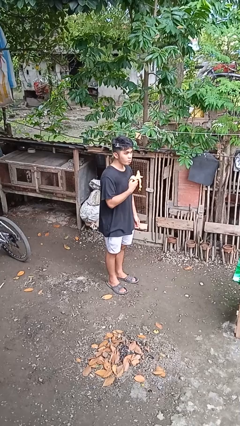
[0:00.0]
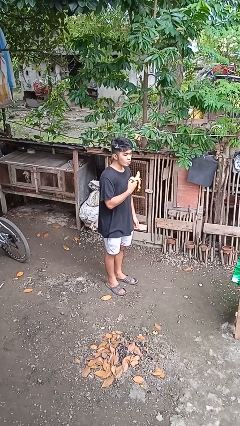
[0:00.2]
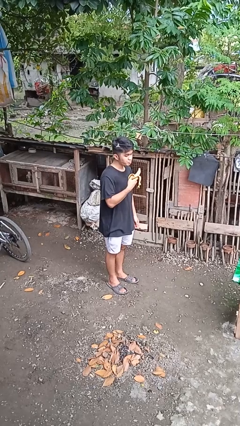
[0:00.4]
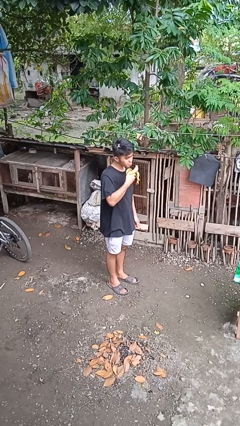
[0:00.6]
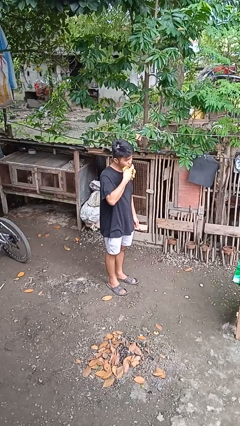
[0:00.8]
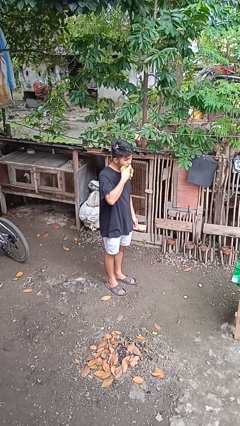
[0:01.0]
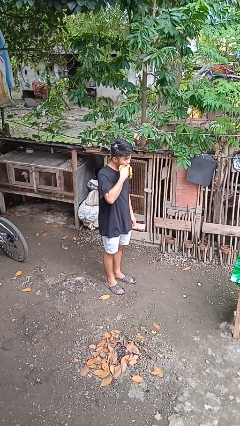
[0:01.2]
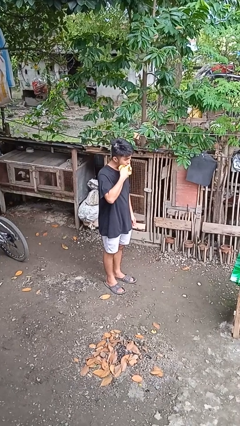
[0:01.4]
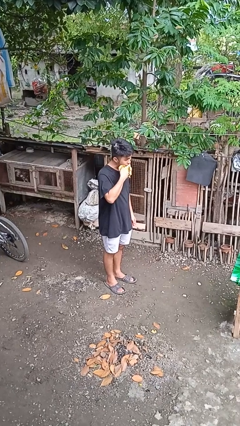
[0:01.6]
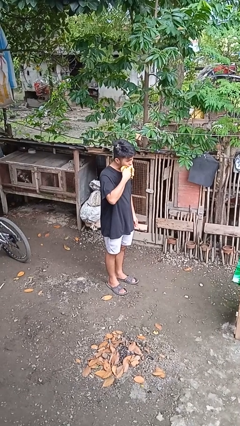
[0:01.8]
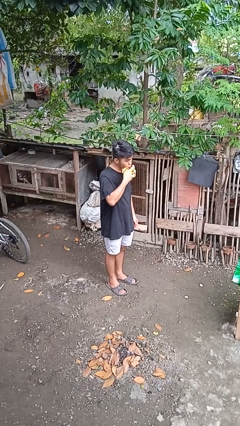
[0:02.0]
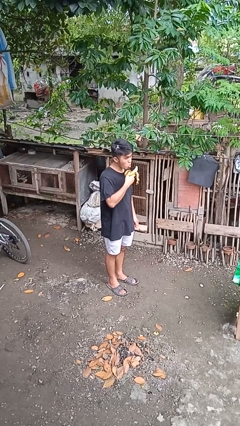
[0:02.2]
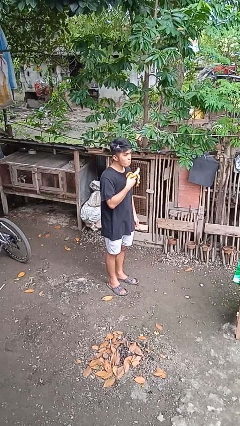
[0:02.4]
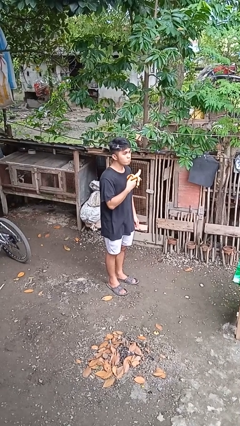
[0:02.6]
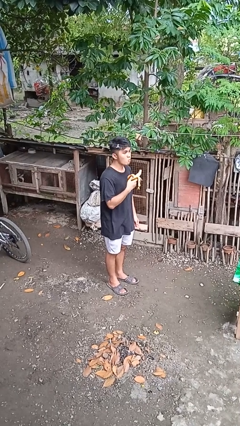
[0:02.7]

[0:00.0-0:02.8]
person eats banana

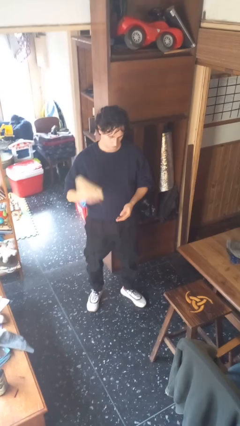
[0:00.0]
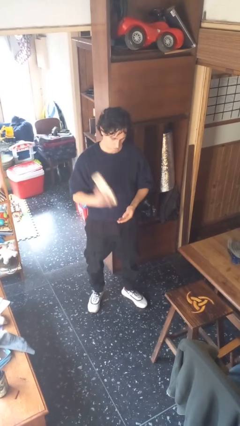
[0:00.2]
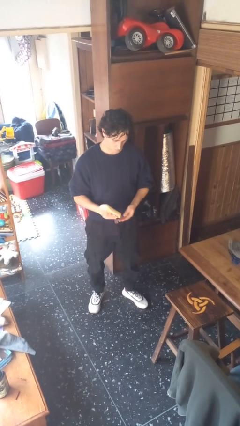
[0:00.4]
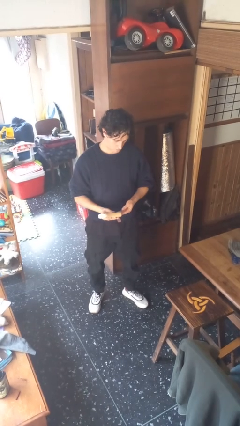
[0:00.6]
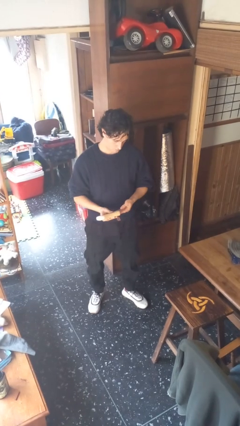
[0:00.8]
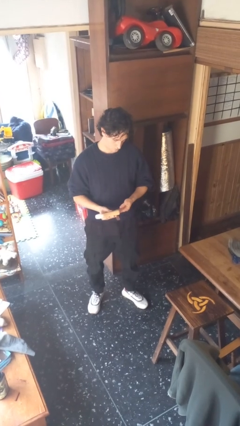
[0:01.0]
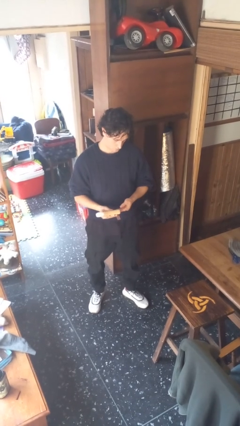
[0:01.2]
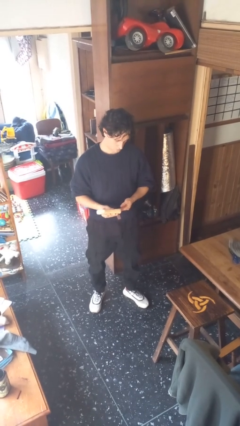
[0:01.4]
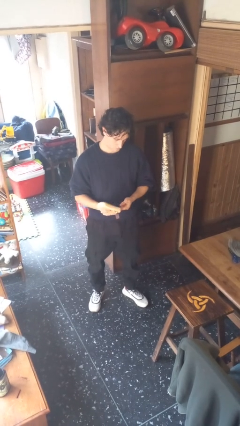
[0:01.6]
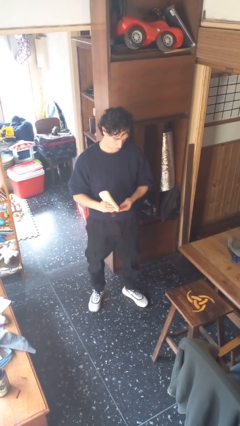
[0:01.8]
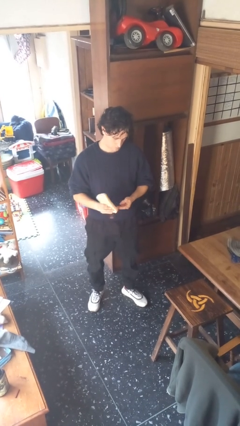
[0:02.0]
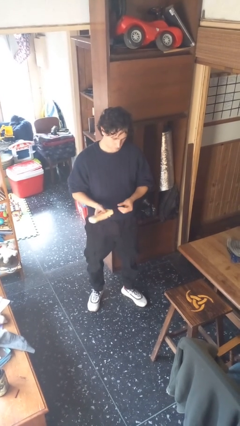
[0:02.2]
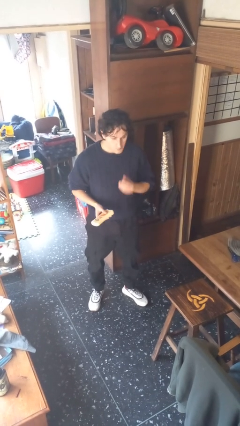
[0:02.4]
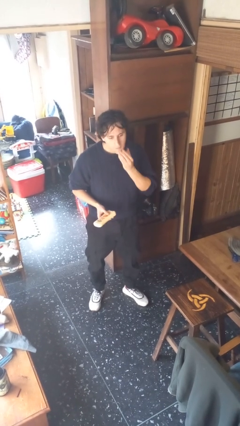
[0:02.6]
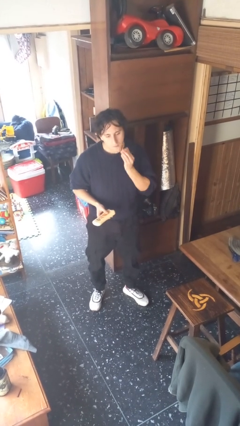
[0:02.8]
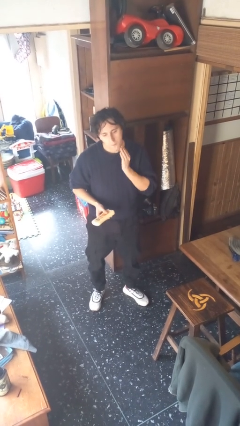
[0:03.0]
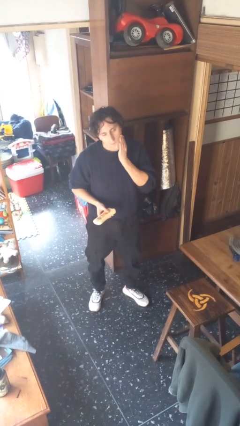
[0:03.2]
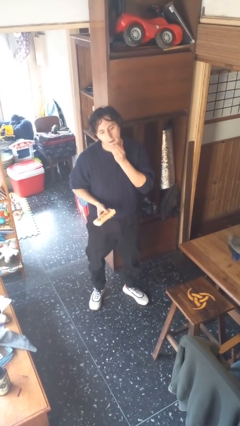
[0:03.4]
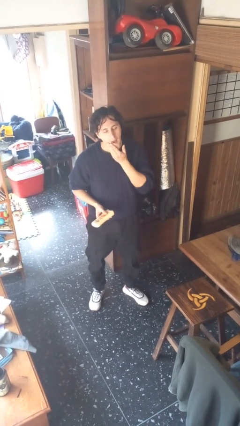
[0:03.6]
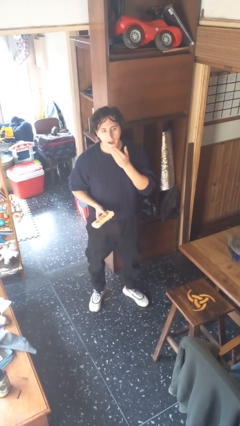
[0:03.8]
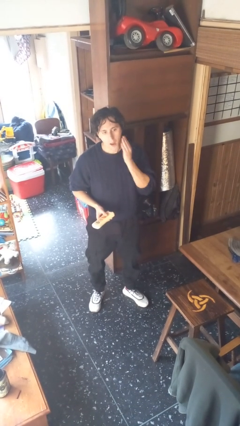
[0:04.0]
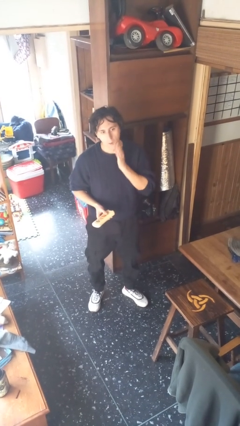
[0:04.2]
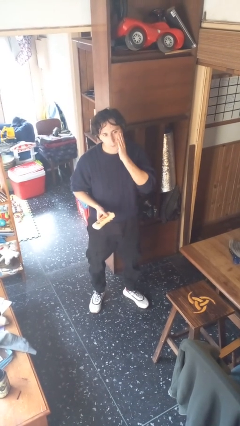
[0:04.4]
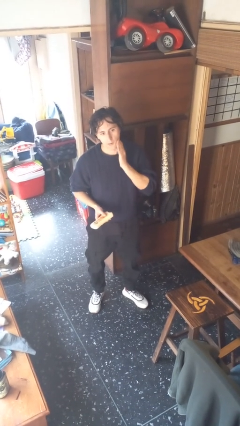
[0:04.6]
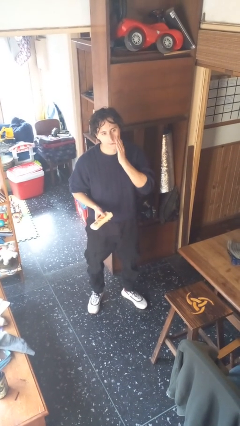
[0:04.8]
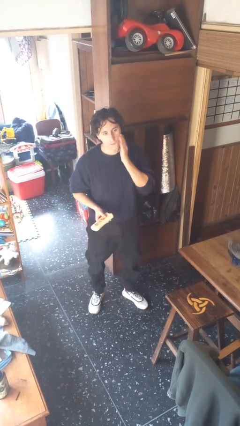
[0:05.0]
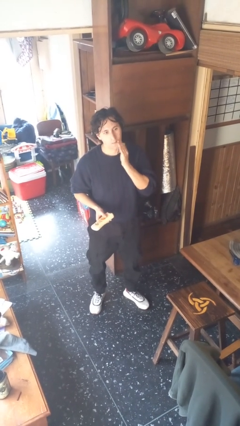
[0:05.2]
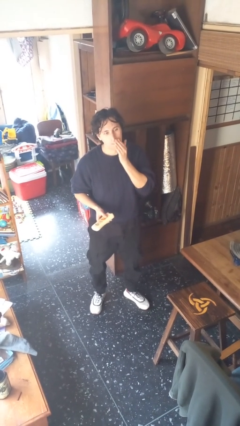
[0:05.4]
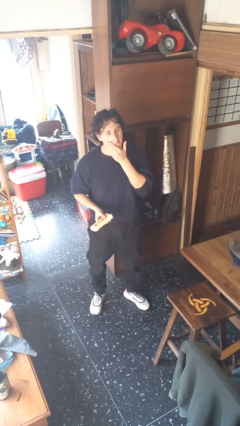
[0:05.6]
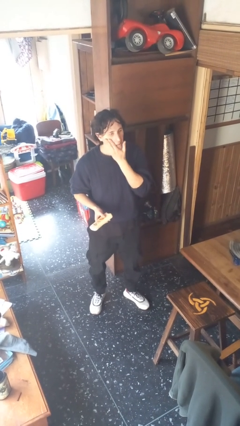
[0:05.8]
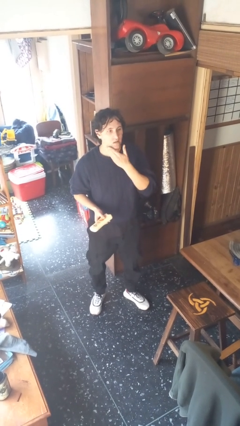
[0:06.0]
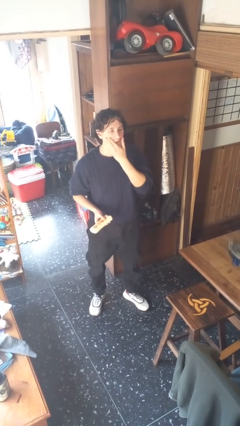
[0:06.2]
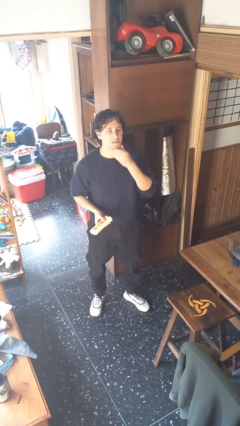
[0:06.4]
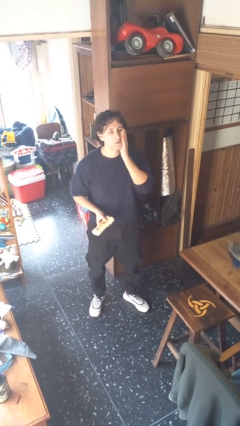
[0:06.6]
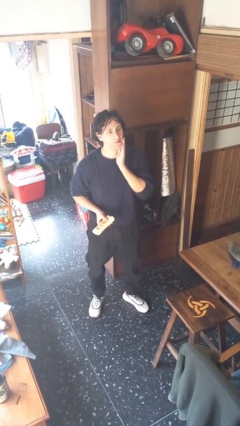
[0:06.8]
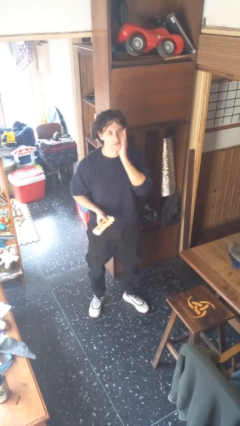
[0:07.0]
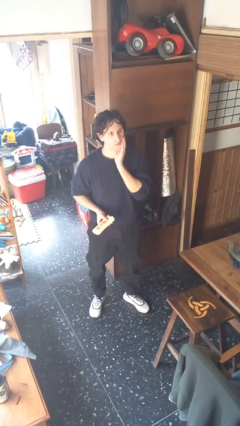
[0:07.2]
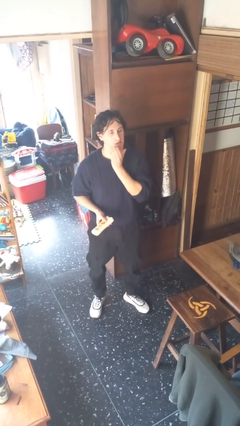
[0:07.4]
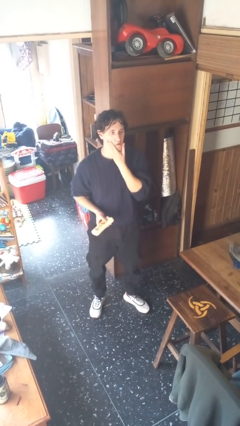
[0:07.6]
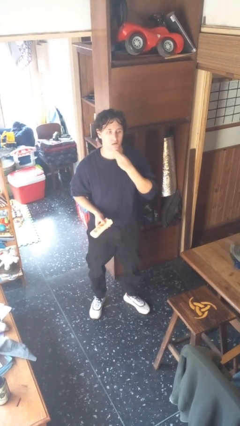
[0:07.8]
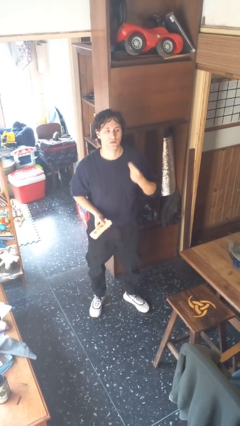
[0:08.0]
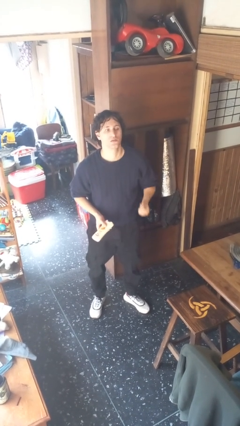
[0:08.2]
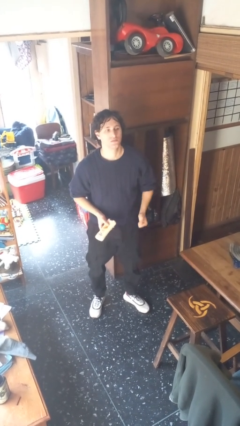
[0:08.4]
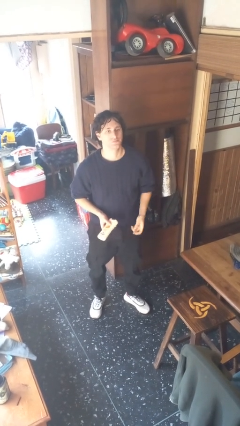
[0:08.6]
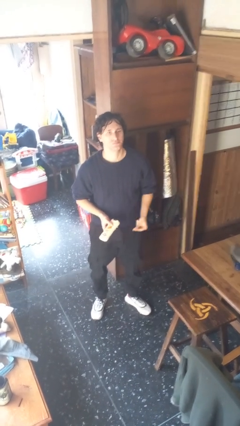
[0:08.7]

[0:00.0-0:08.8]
person applies sunscreen

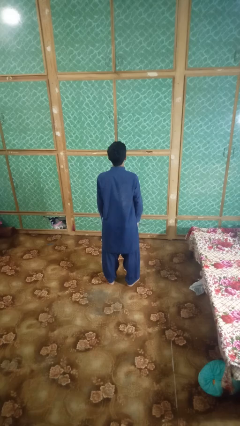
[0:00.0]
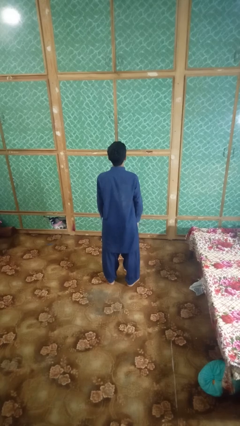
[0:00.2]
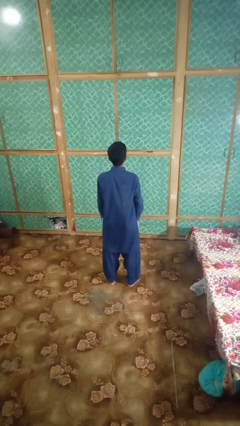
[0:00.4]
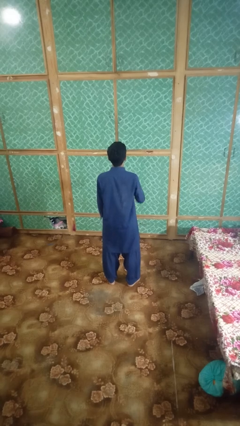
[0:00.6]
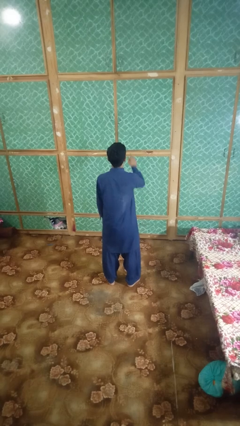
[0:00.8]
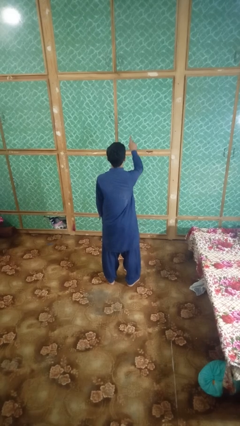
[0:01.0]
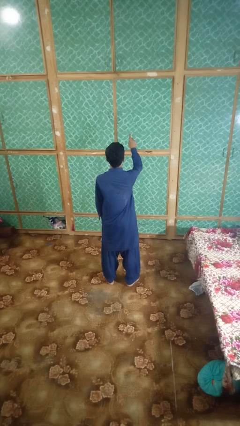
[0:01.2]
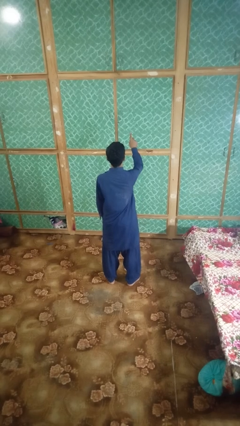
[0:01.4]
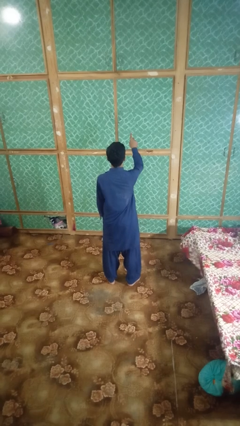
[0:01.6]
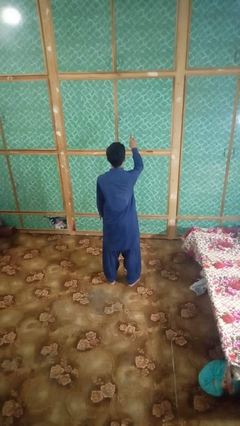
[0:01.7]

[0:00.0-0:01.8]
person gestures number one

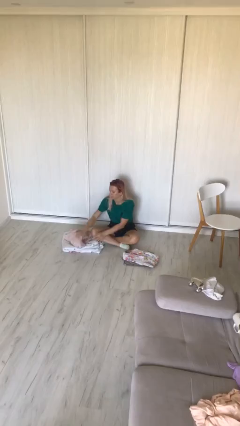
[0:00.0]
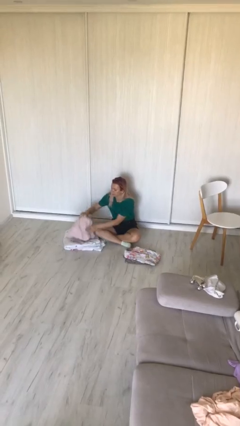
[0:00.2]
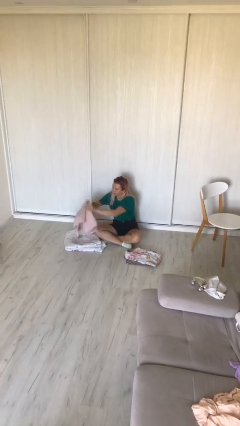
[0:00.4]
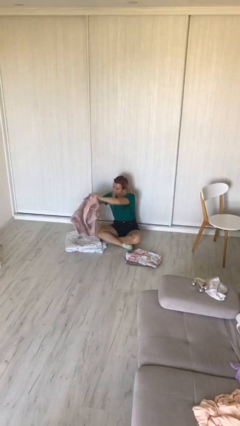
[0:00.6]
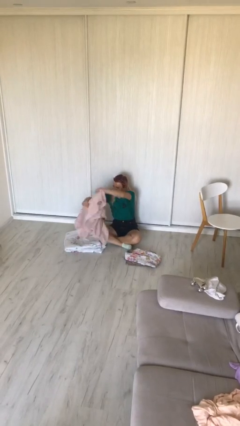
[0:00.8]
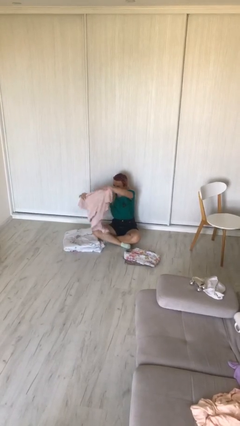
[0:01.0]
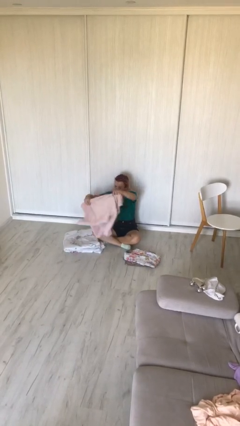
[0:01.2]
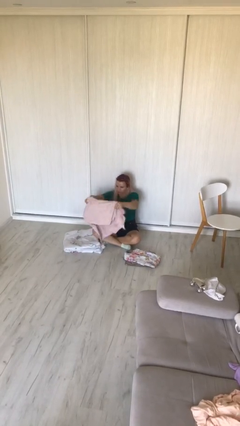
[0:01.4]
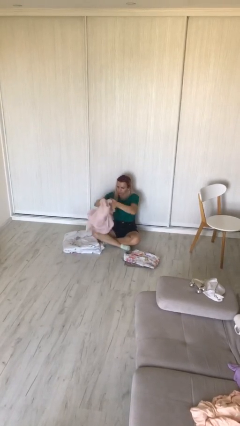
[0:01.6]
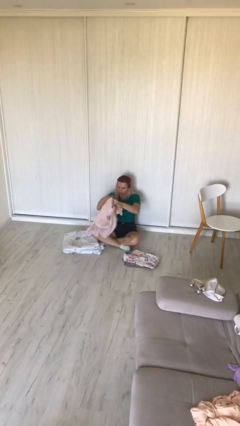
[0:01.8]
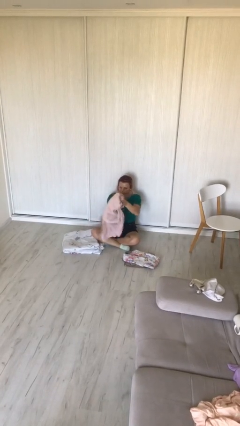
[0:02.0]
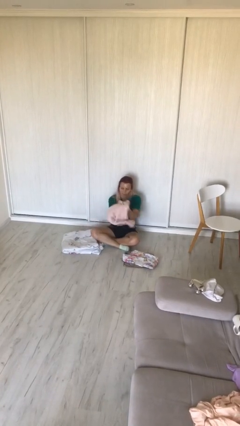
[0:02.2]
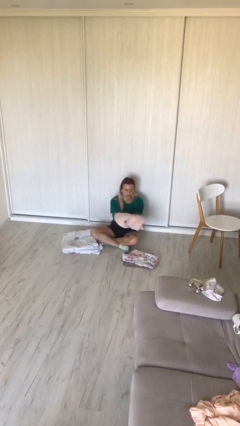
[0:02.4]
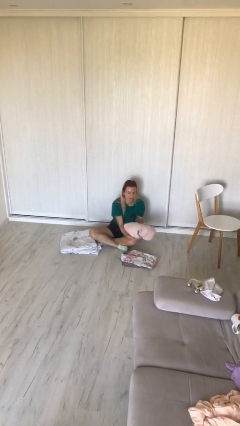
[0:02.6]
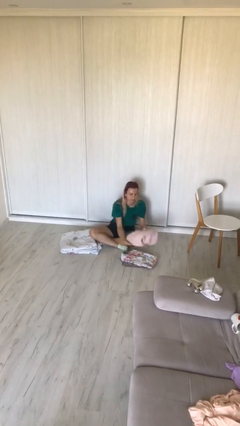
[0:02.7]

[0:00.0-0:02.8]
person folds towel

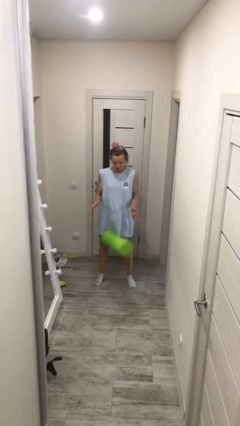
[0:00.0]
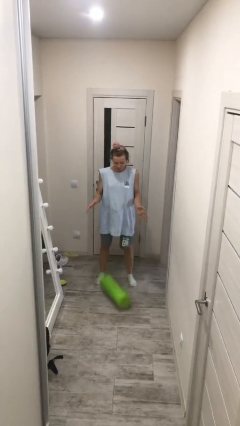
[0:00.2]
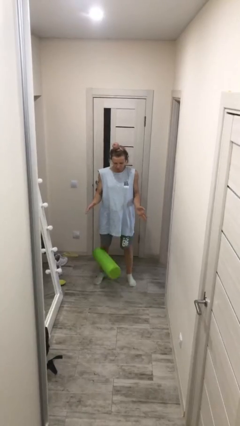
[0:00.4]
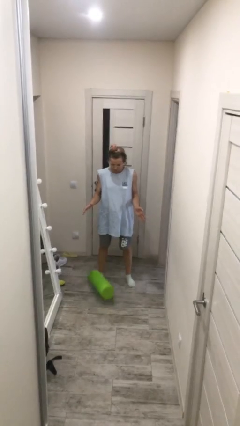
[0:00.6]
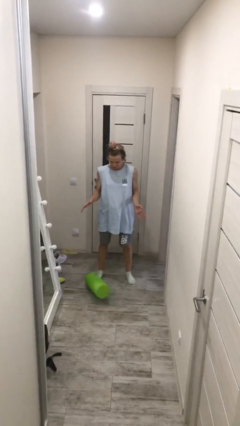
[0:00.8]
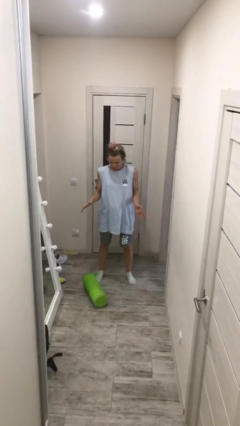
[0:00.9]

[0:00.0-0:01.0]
person drops object

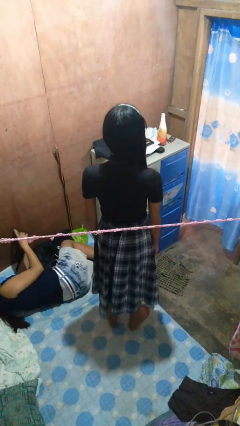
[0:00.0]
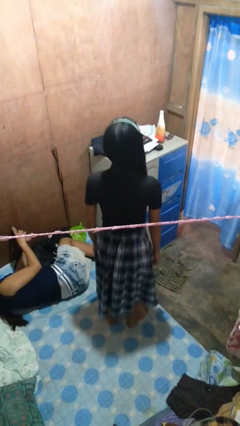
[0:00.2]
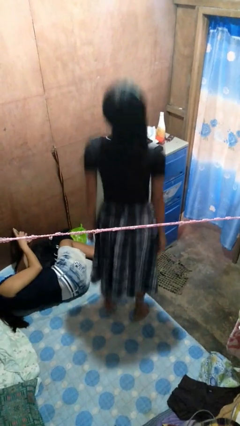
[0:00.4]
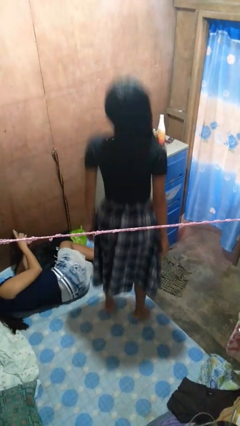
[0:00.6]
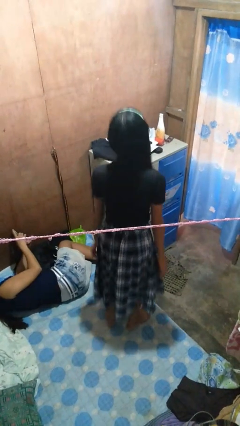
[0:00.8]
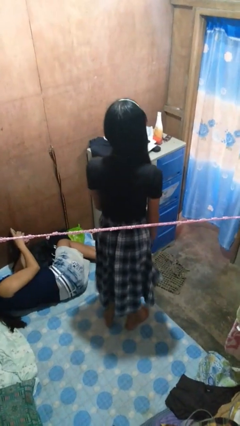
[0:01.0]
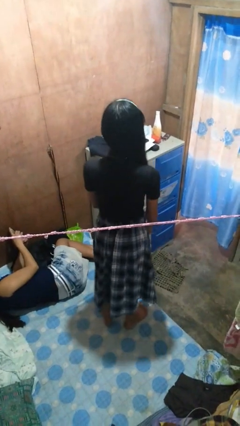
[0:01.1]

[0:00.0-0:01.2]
person jumps on bed
